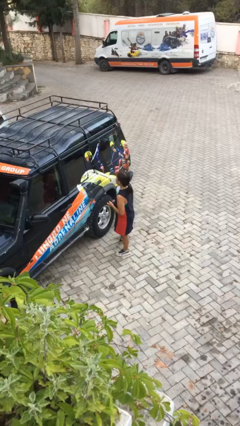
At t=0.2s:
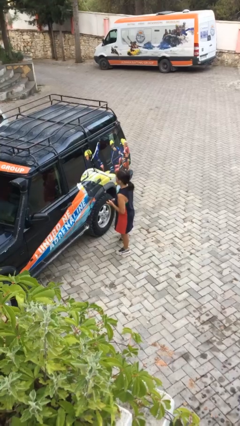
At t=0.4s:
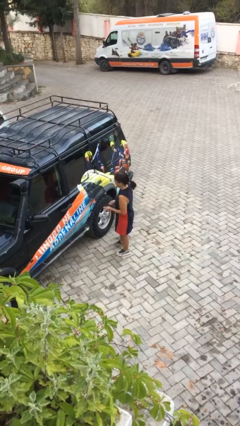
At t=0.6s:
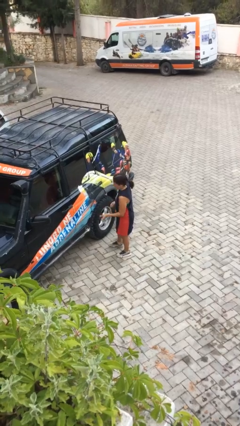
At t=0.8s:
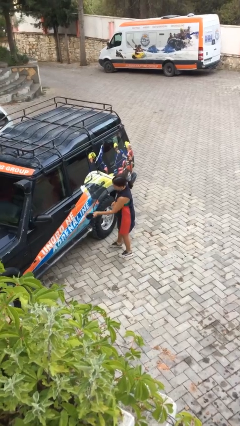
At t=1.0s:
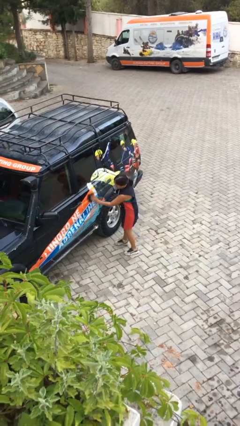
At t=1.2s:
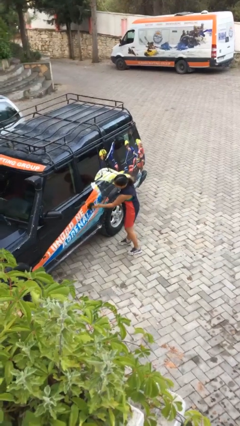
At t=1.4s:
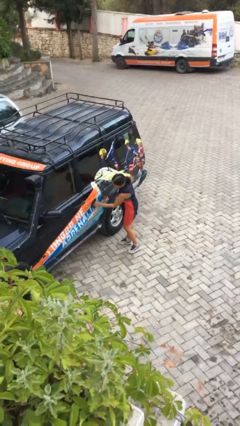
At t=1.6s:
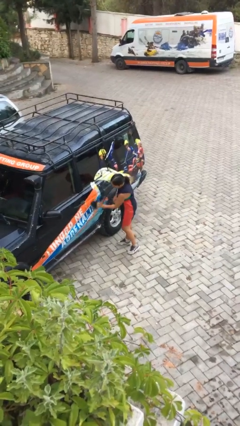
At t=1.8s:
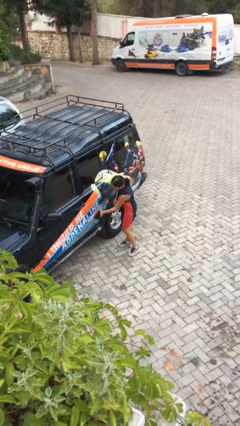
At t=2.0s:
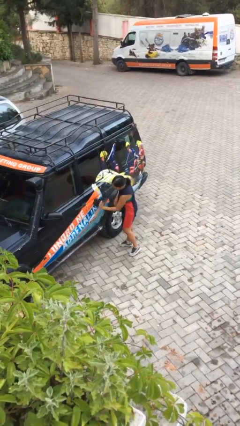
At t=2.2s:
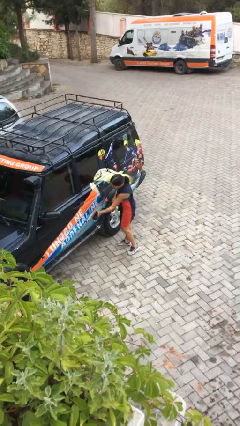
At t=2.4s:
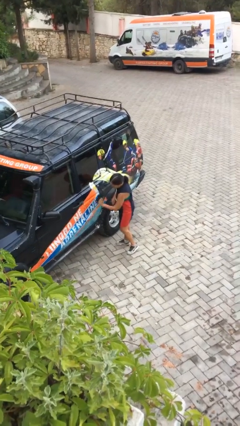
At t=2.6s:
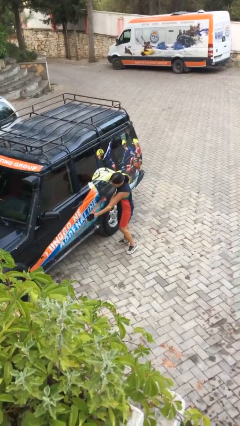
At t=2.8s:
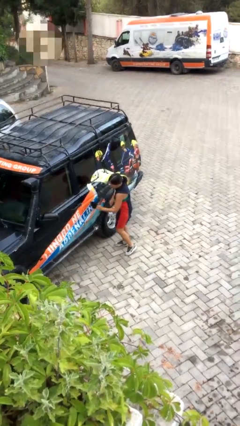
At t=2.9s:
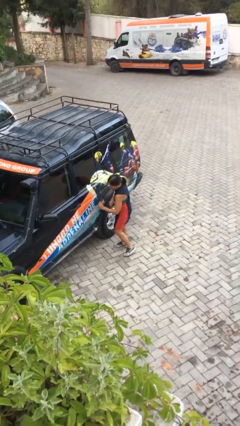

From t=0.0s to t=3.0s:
person polishes car with rag

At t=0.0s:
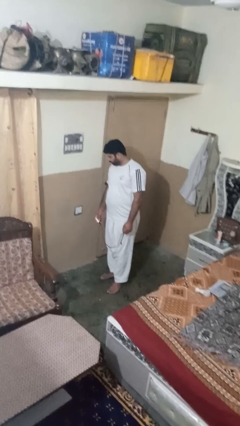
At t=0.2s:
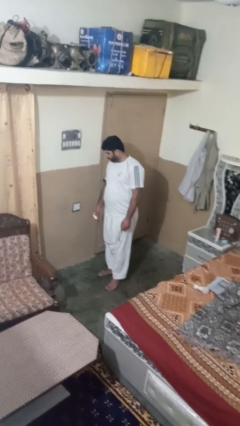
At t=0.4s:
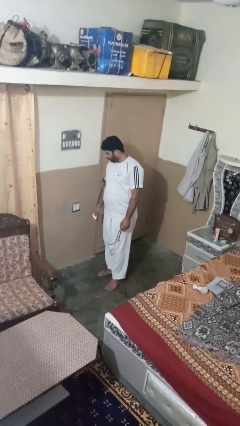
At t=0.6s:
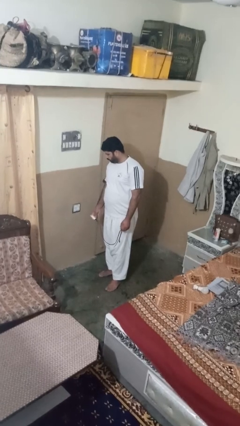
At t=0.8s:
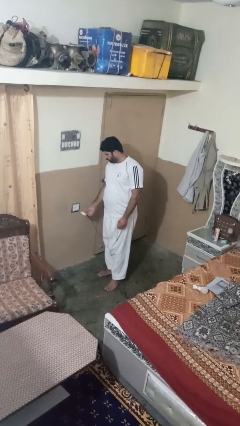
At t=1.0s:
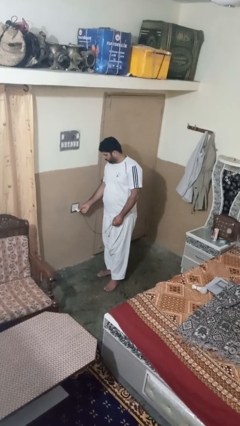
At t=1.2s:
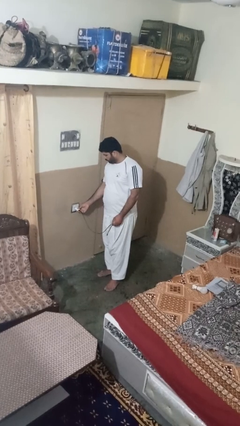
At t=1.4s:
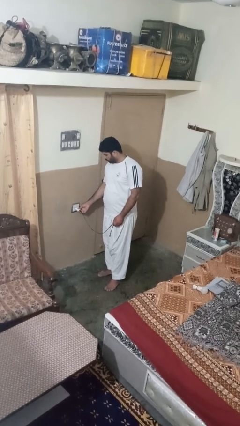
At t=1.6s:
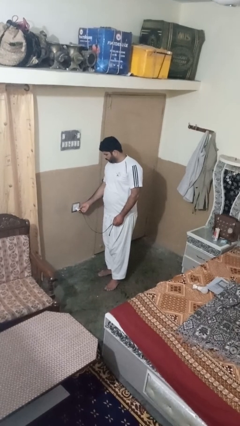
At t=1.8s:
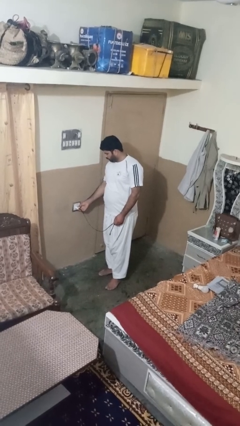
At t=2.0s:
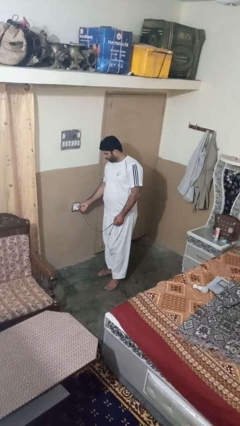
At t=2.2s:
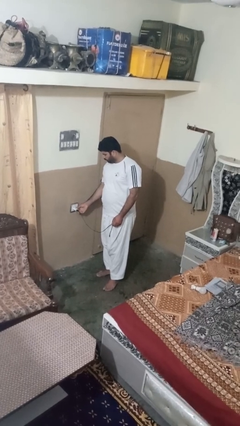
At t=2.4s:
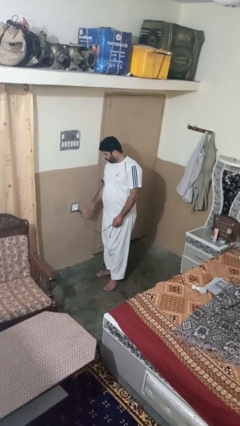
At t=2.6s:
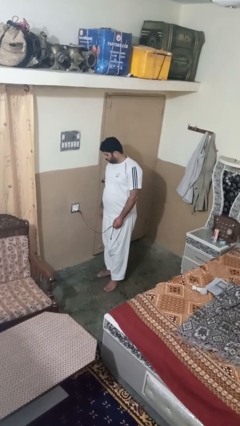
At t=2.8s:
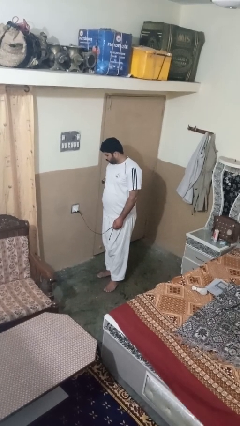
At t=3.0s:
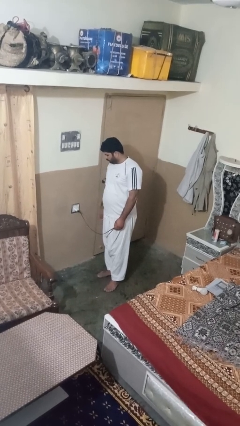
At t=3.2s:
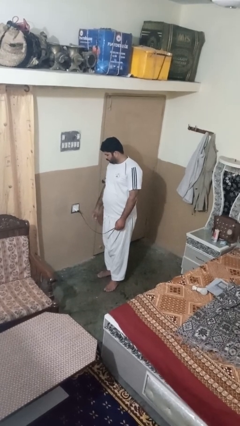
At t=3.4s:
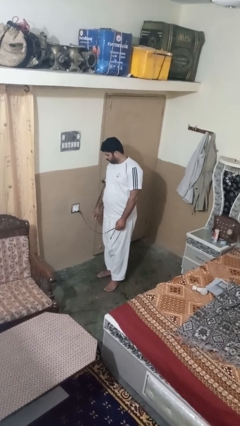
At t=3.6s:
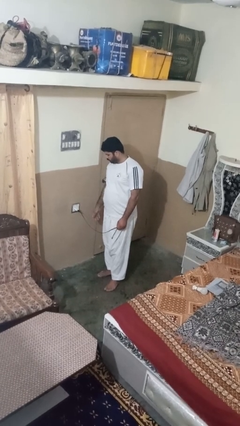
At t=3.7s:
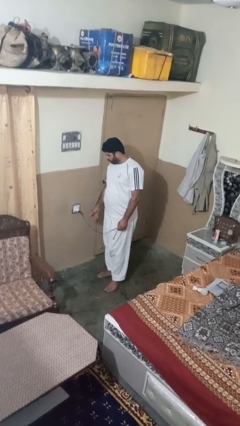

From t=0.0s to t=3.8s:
person plugs into electrical socket

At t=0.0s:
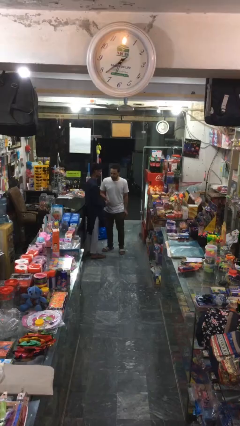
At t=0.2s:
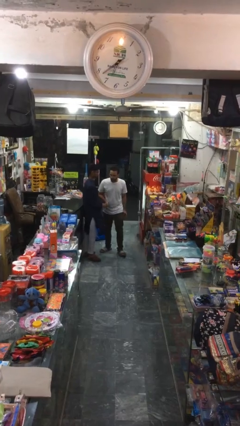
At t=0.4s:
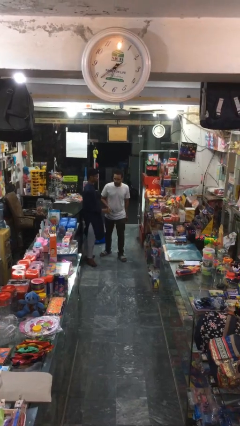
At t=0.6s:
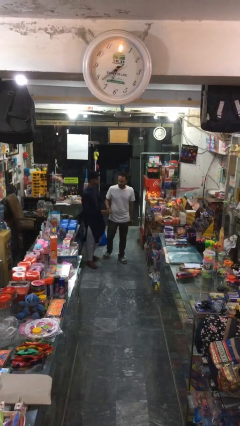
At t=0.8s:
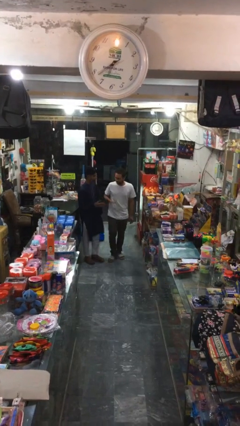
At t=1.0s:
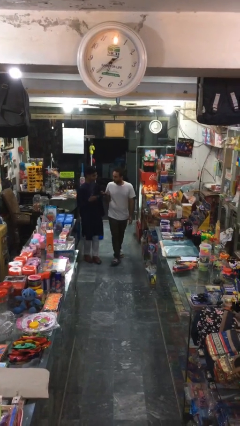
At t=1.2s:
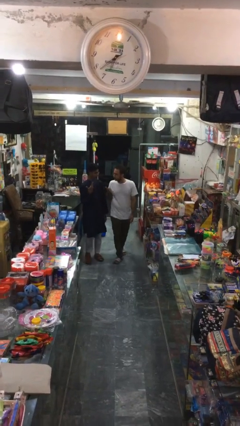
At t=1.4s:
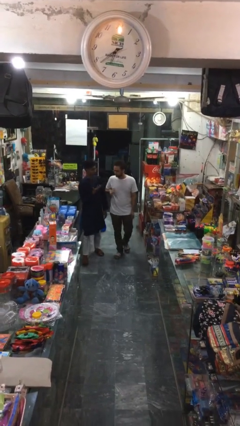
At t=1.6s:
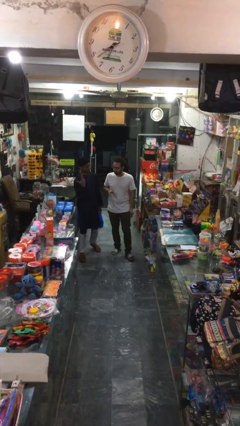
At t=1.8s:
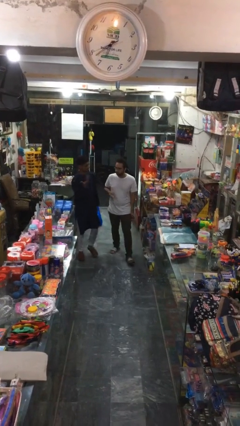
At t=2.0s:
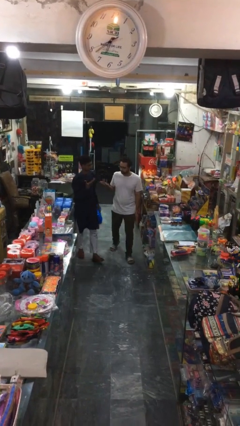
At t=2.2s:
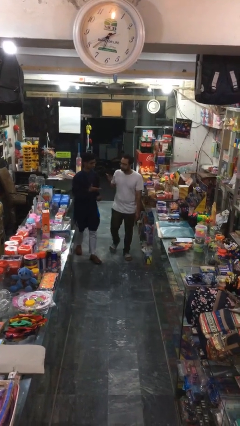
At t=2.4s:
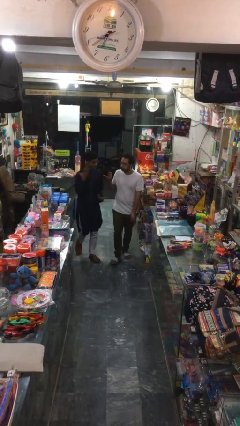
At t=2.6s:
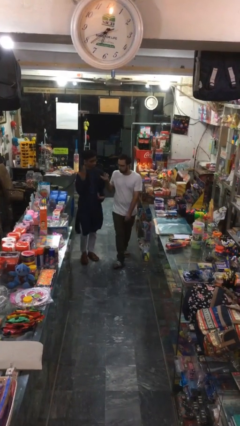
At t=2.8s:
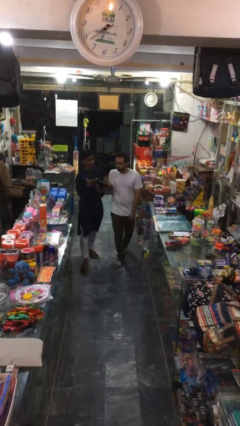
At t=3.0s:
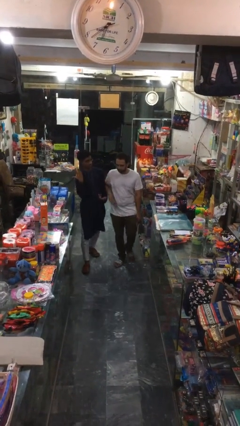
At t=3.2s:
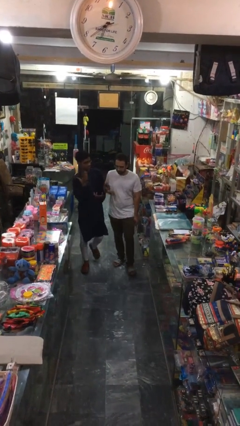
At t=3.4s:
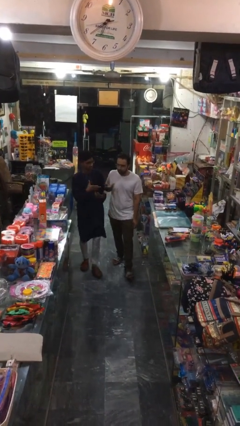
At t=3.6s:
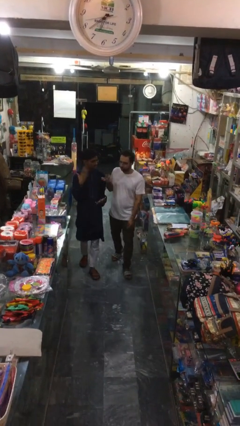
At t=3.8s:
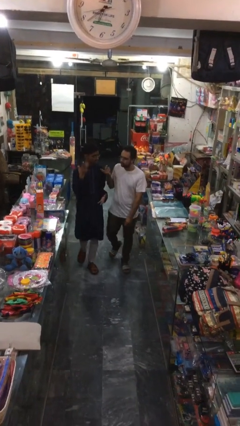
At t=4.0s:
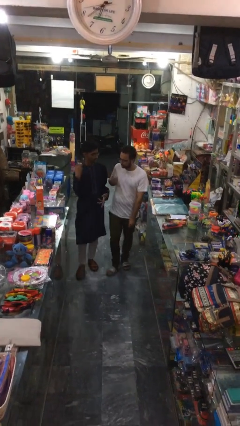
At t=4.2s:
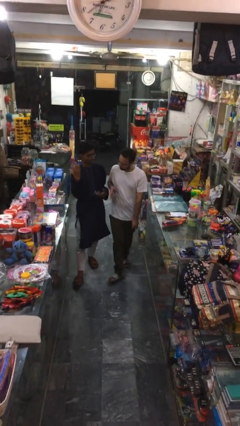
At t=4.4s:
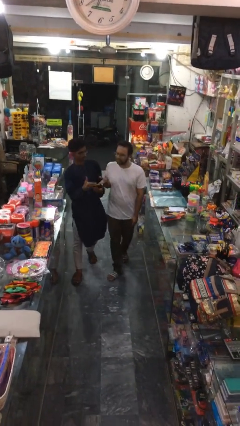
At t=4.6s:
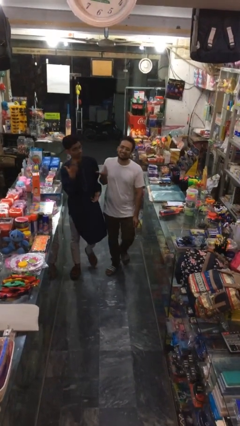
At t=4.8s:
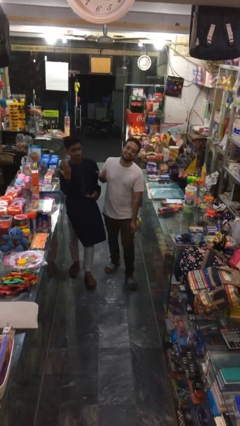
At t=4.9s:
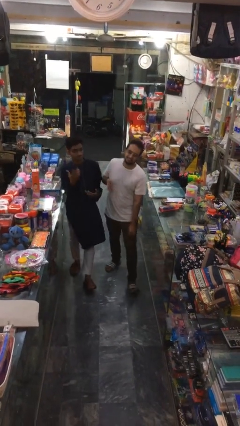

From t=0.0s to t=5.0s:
person talks to person

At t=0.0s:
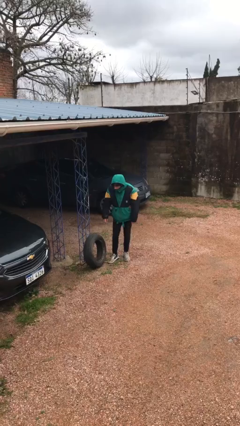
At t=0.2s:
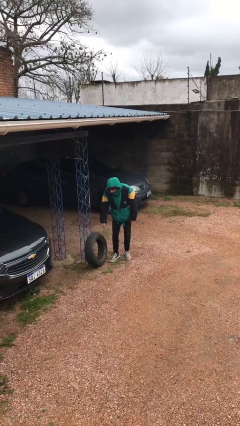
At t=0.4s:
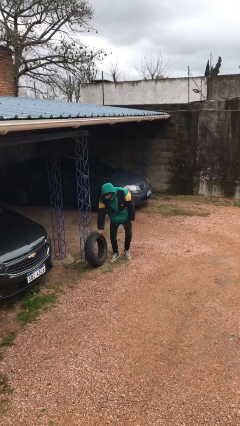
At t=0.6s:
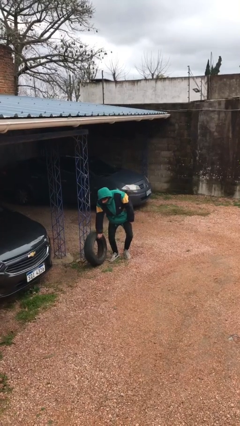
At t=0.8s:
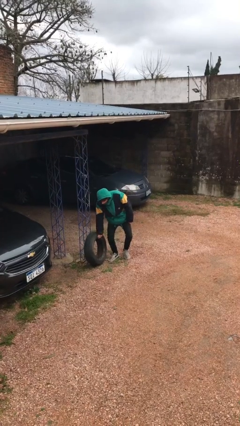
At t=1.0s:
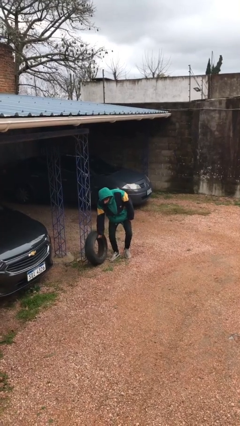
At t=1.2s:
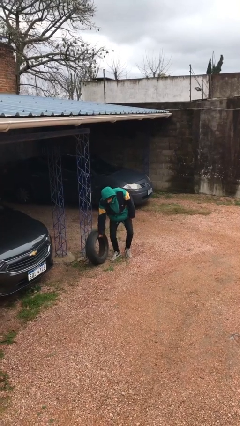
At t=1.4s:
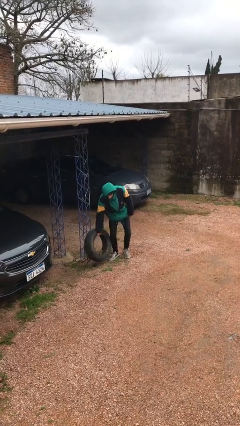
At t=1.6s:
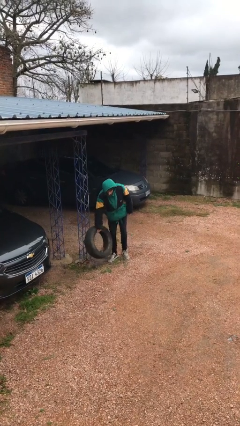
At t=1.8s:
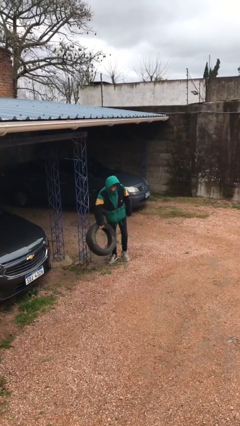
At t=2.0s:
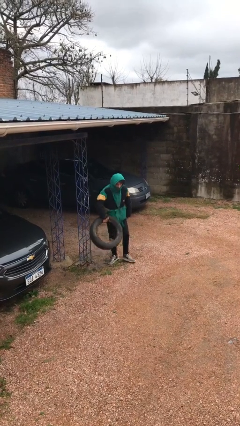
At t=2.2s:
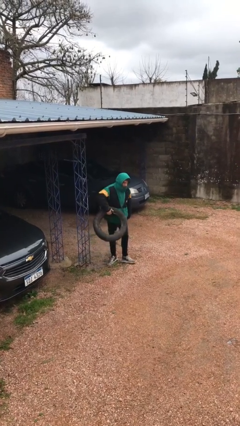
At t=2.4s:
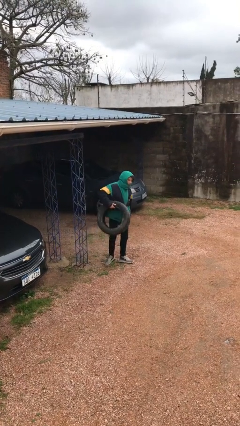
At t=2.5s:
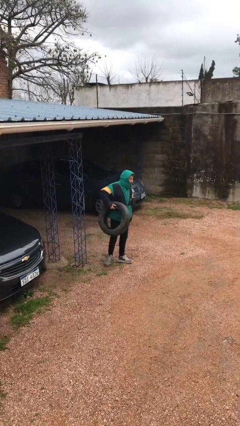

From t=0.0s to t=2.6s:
person picks up object from floor

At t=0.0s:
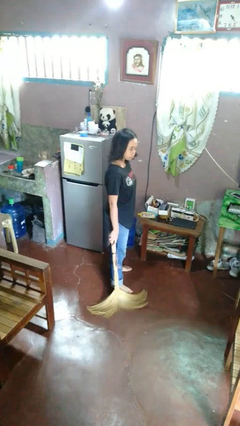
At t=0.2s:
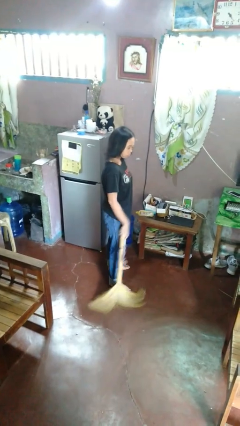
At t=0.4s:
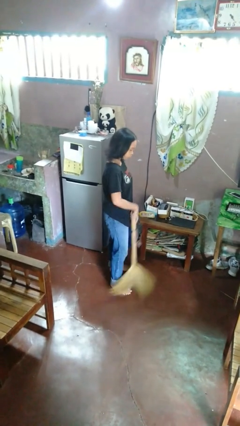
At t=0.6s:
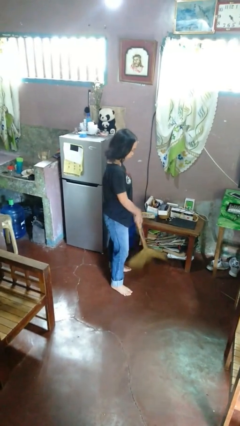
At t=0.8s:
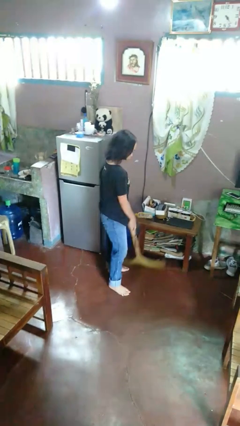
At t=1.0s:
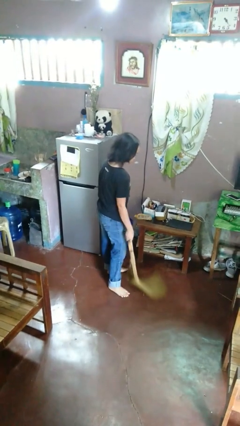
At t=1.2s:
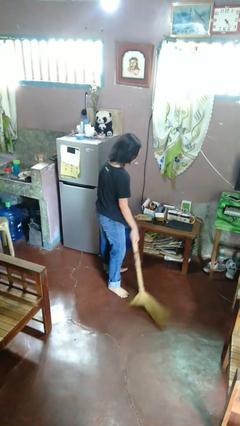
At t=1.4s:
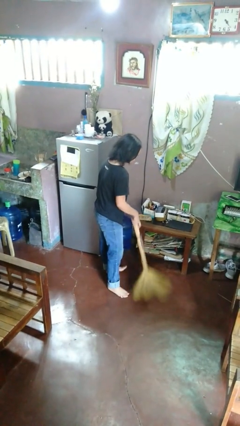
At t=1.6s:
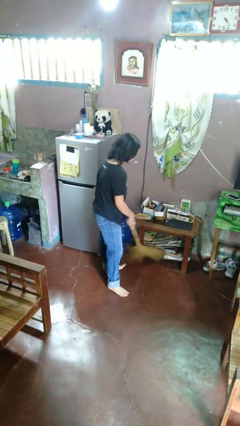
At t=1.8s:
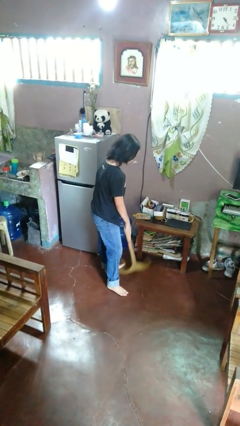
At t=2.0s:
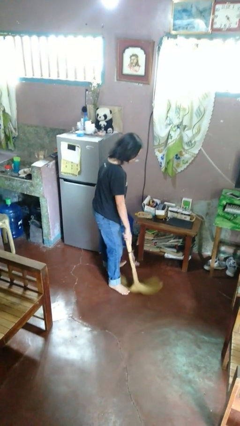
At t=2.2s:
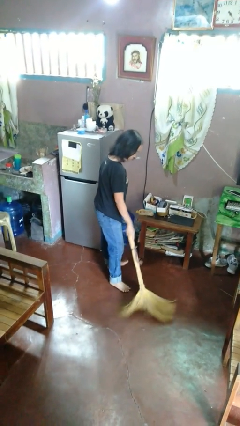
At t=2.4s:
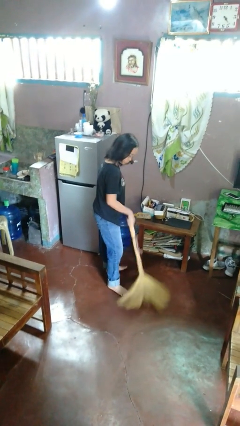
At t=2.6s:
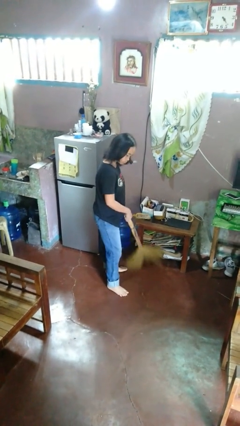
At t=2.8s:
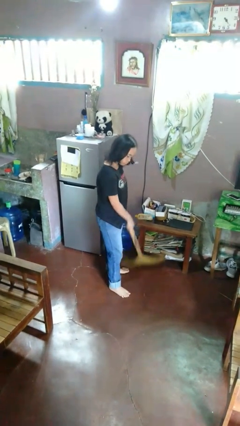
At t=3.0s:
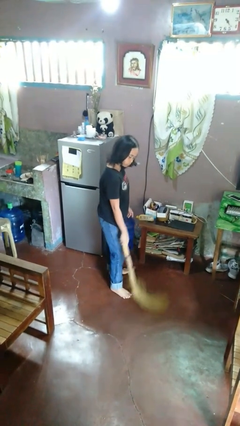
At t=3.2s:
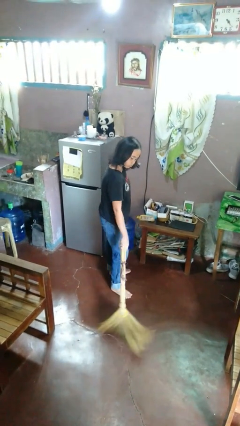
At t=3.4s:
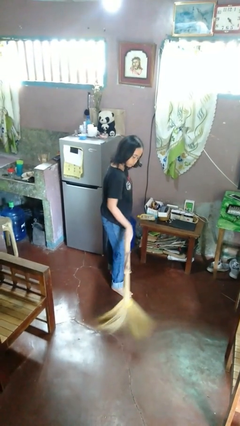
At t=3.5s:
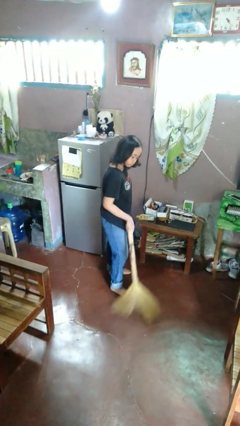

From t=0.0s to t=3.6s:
person sweeps floor
